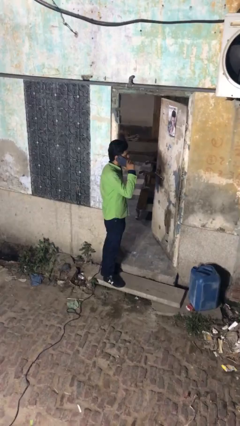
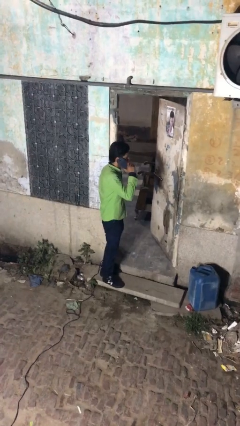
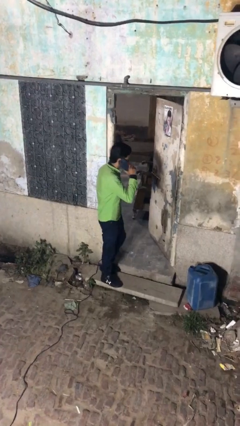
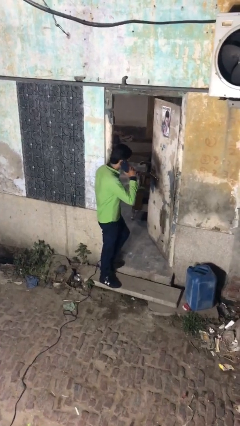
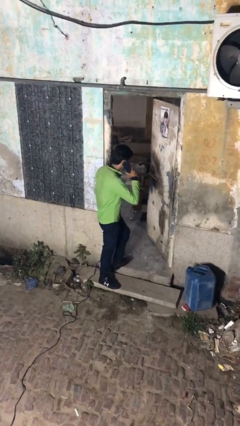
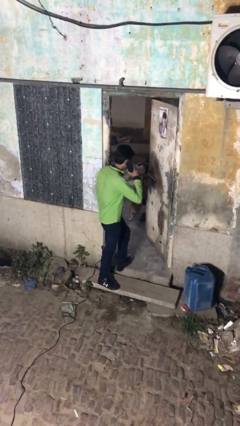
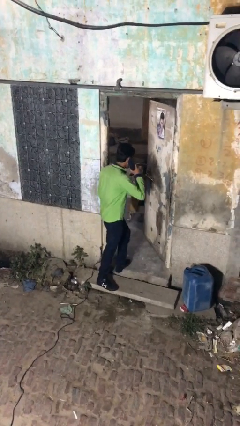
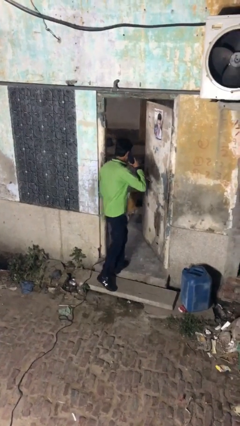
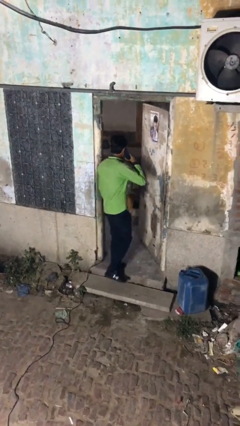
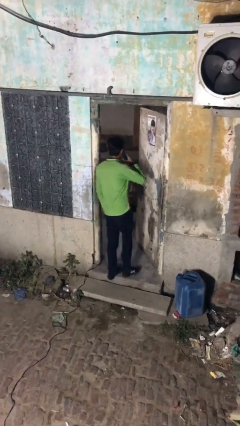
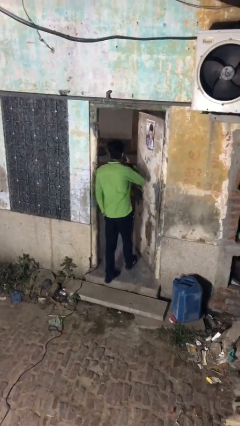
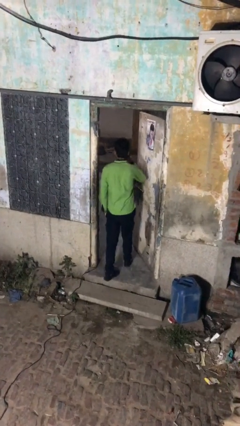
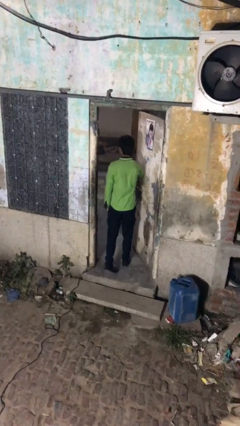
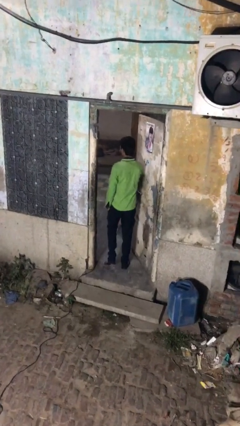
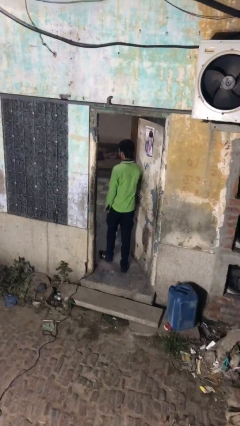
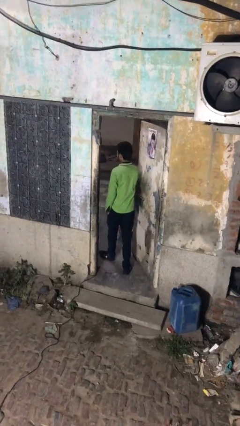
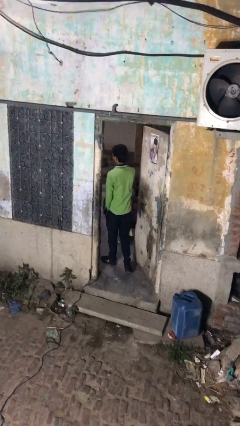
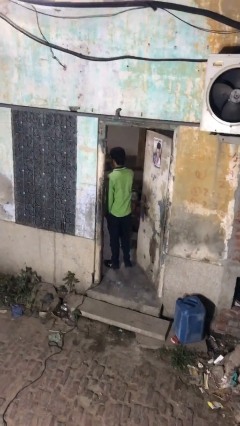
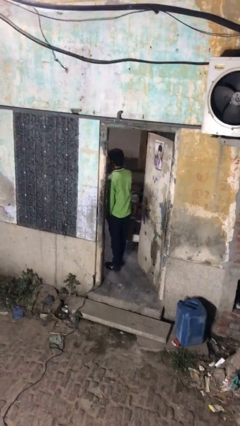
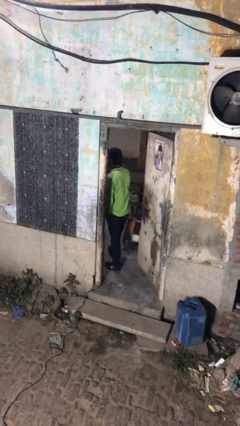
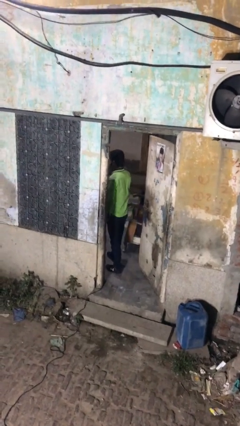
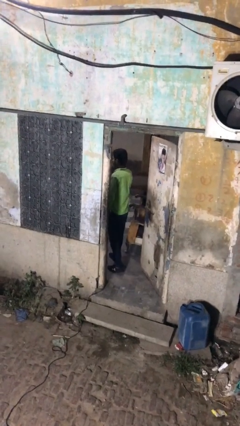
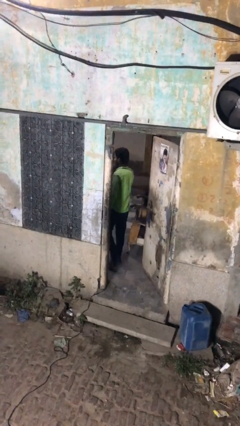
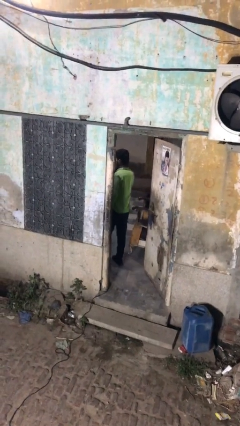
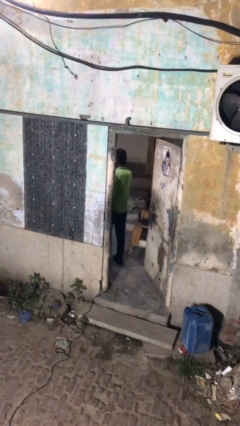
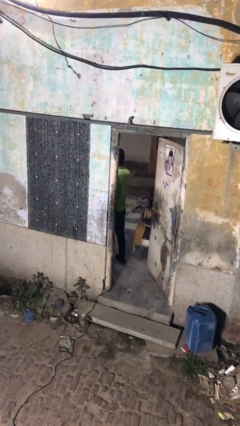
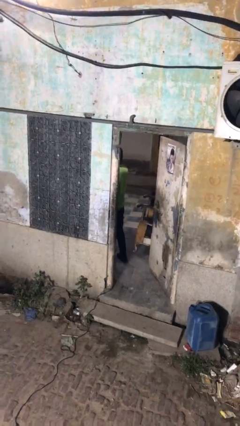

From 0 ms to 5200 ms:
person exits scene through structure

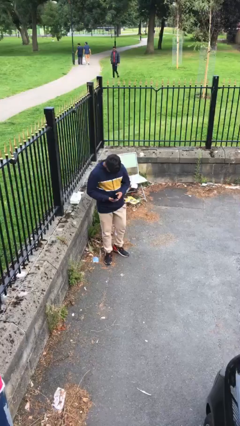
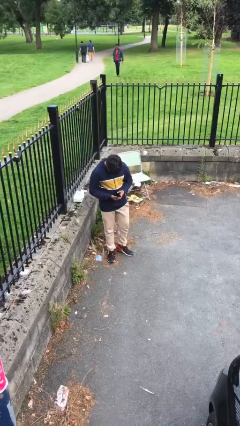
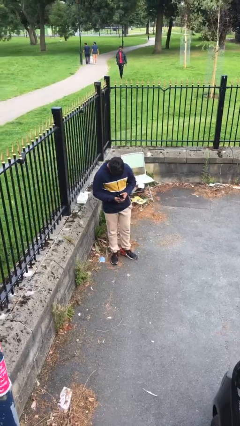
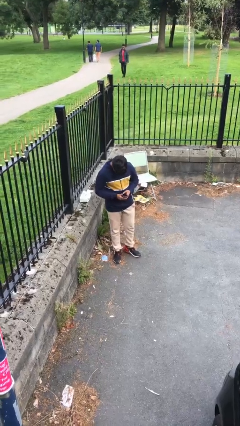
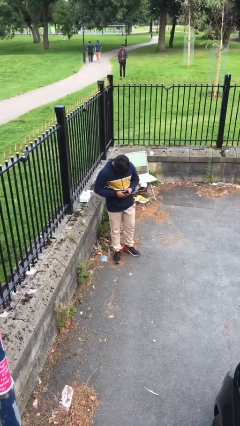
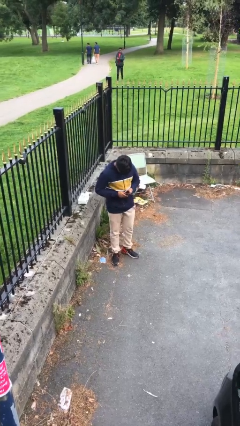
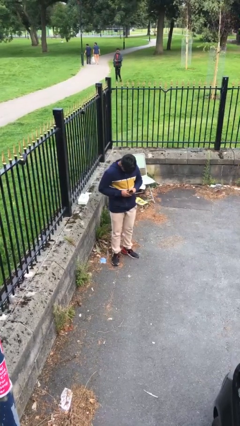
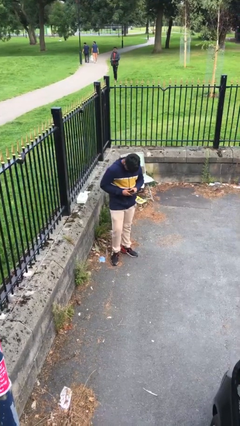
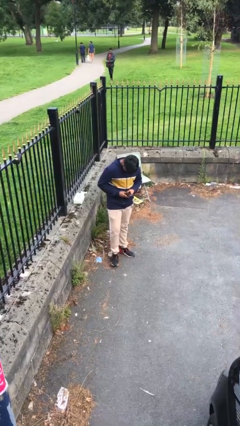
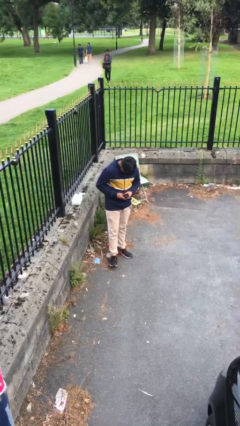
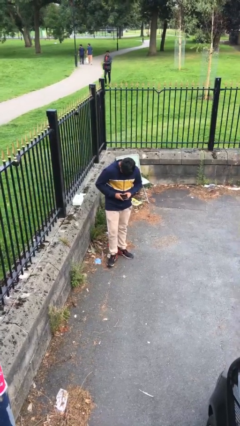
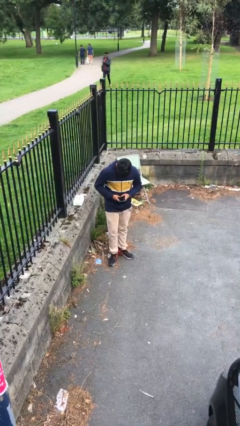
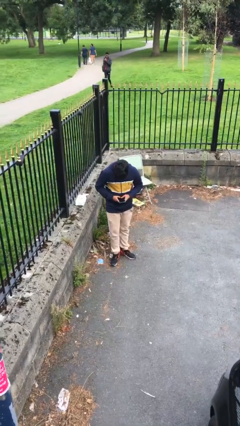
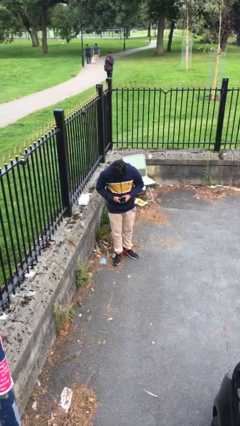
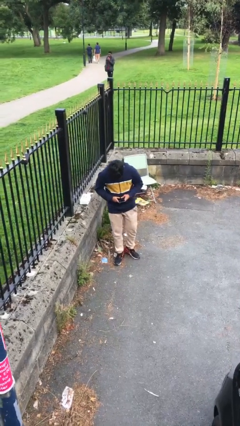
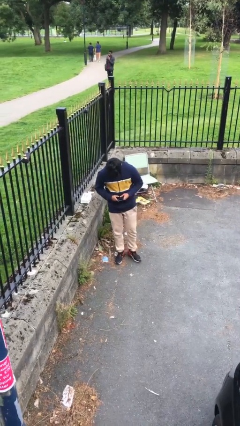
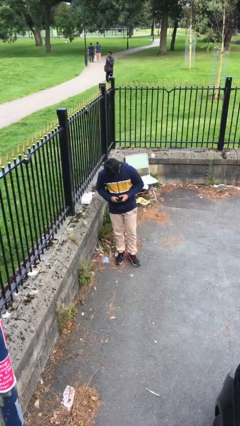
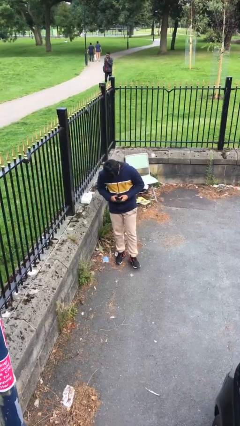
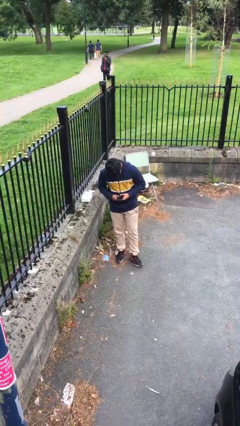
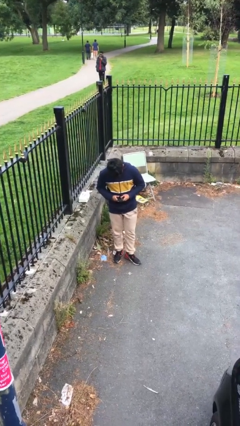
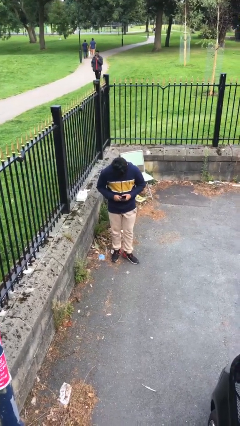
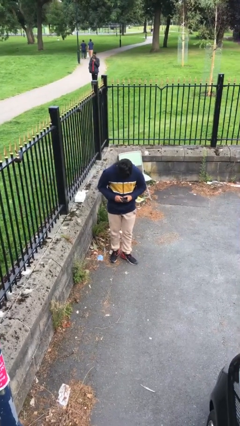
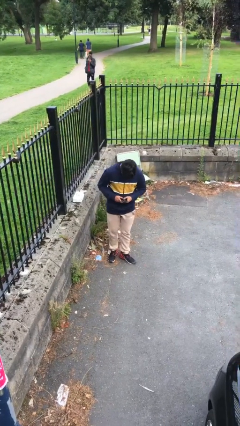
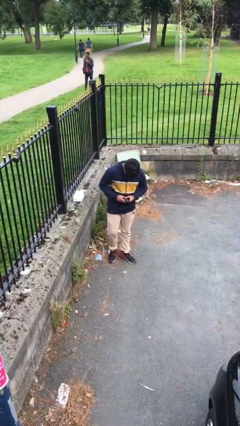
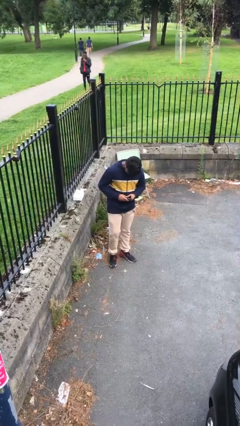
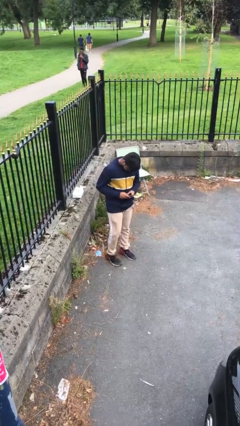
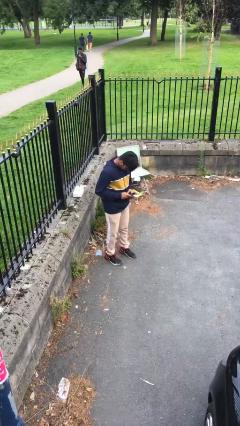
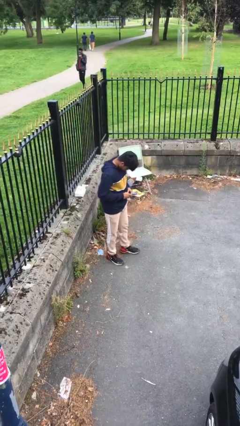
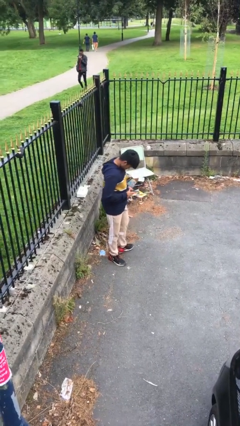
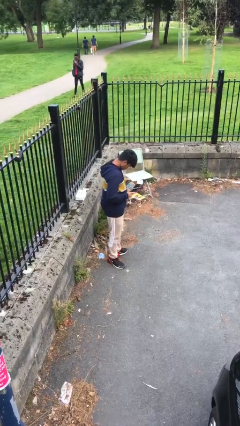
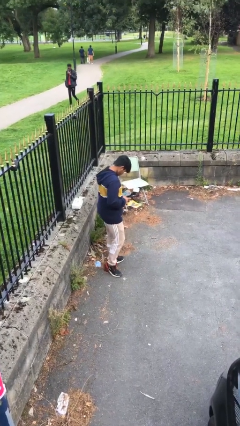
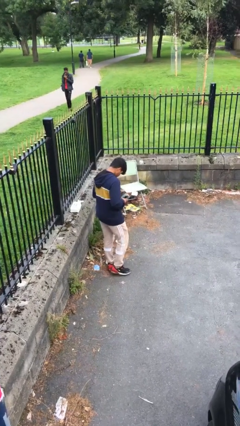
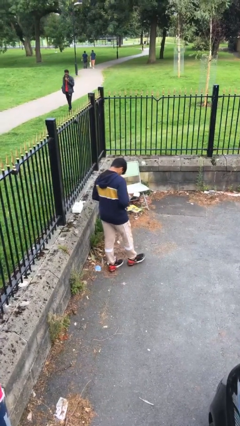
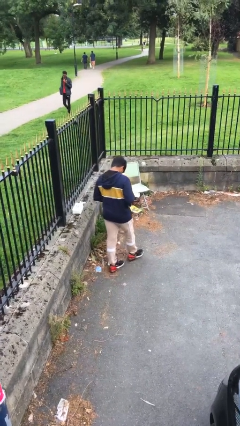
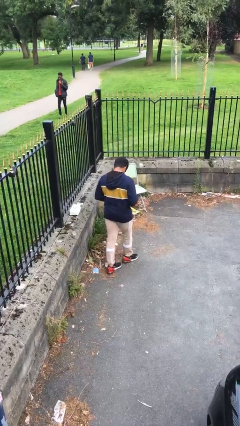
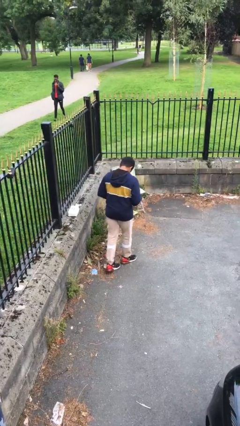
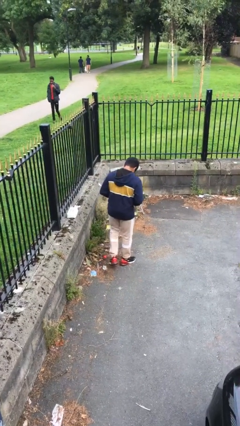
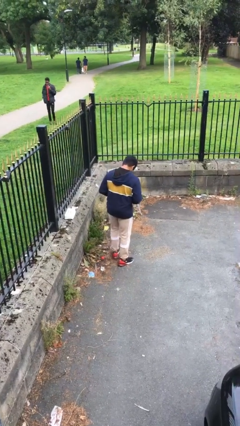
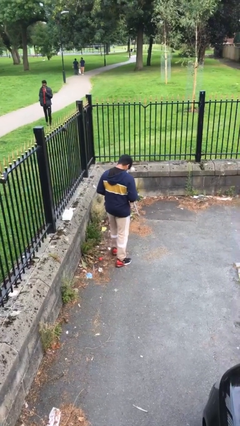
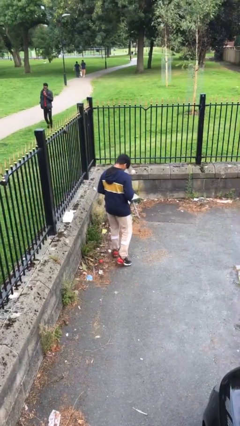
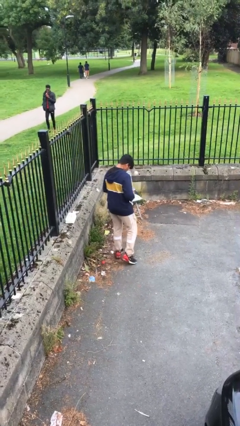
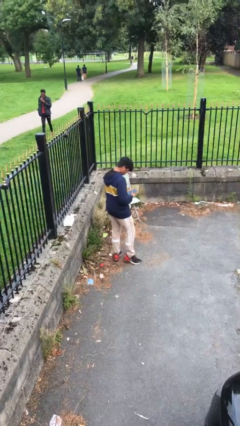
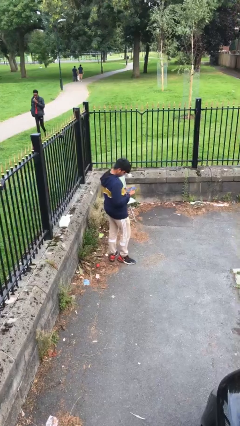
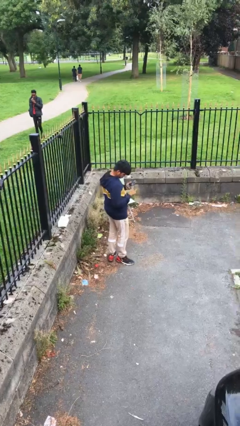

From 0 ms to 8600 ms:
person texts on phone

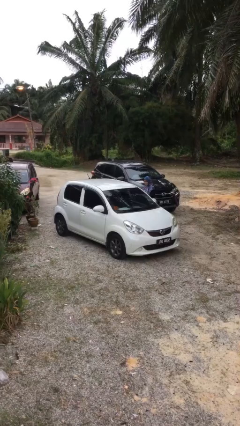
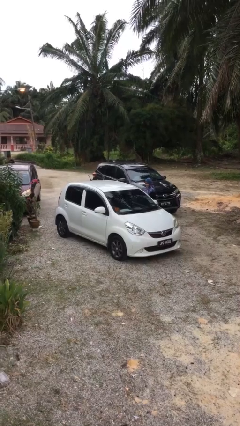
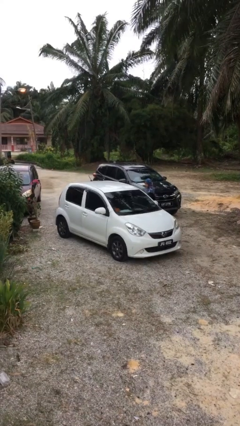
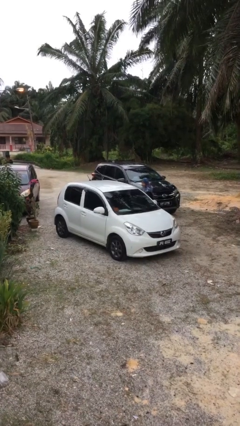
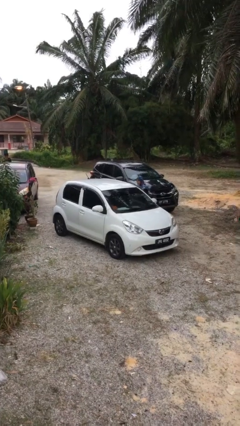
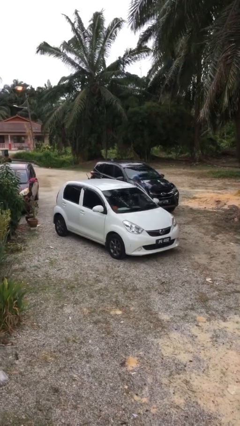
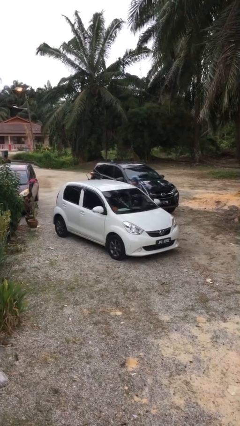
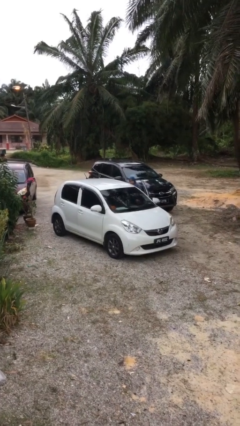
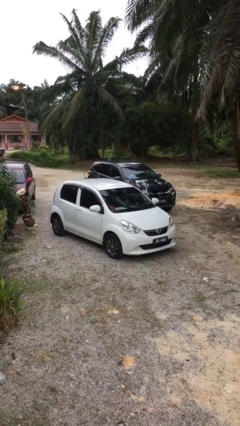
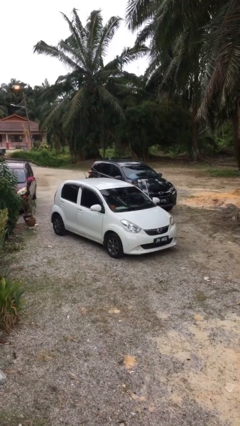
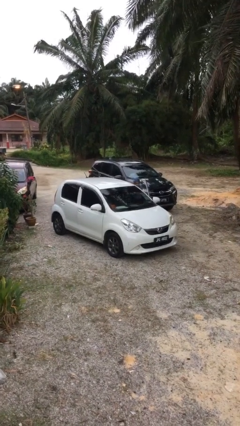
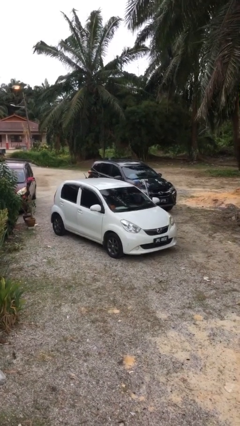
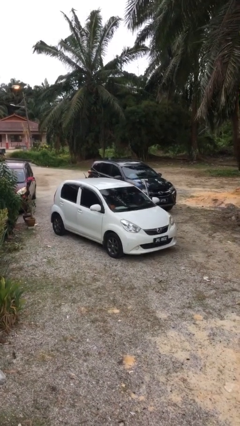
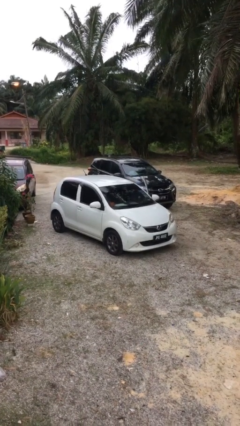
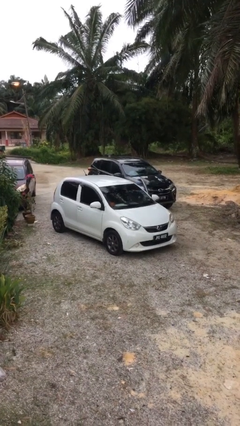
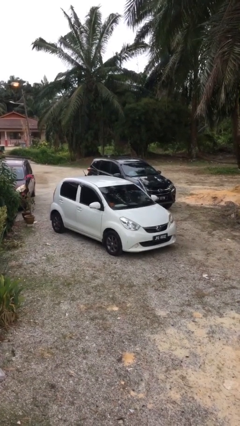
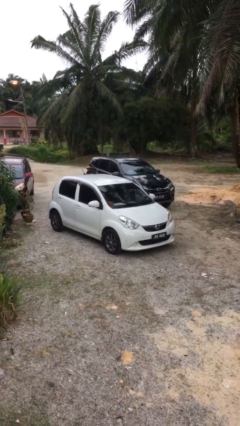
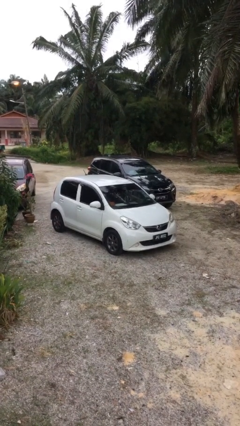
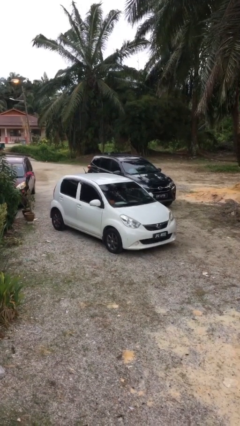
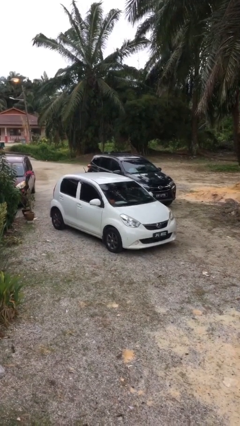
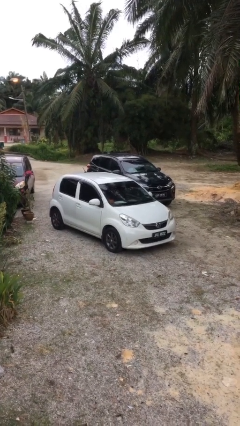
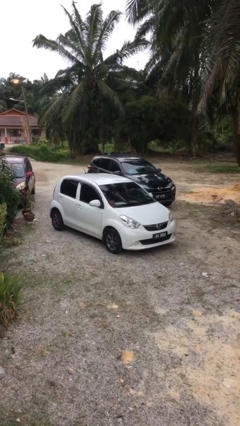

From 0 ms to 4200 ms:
car picks up person
